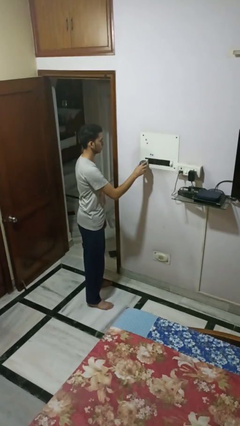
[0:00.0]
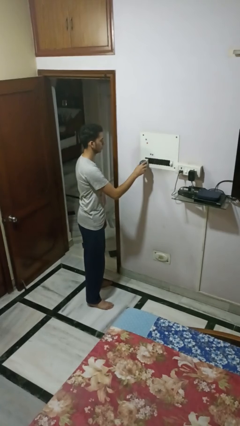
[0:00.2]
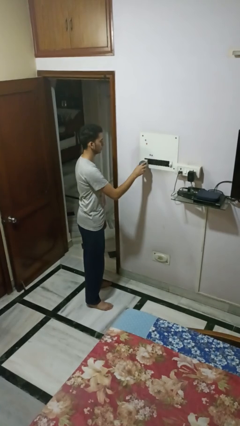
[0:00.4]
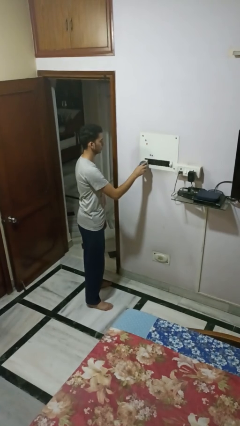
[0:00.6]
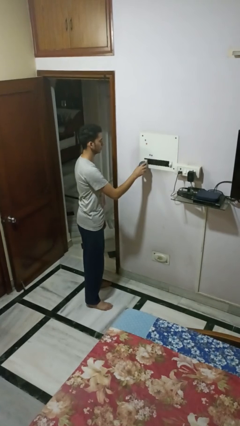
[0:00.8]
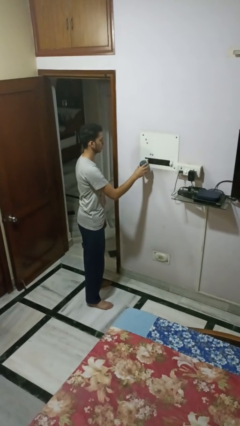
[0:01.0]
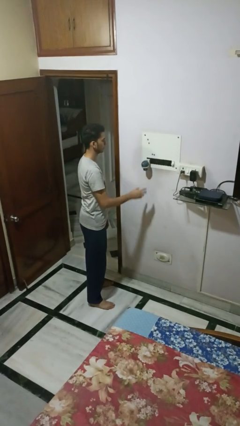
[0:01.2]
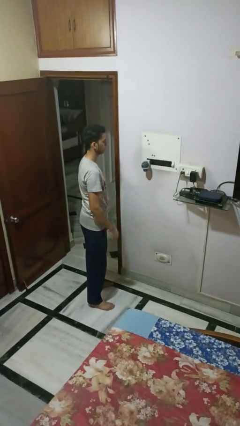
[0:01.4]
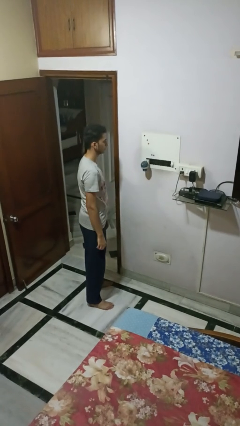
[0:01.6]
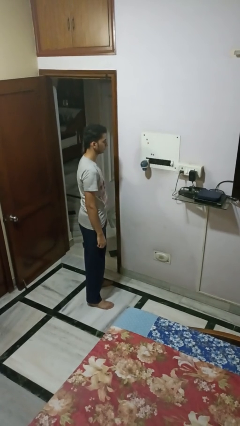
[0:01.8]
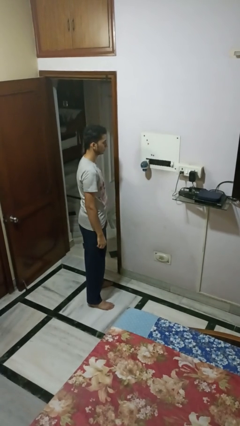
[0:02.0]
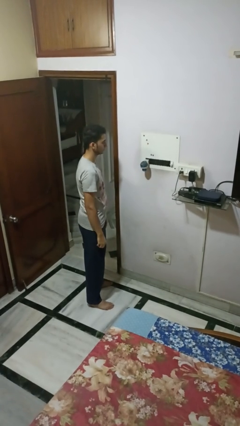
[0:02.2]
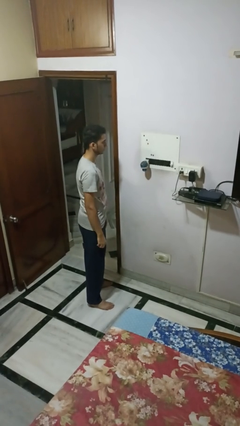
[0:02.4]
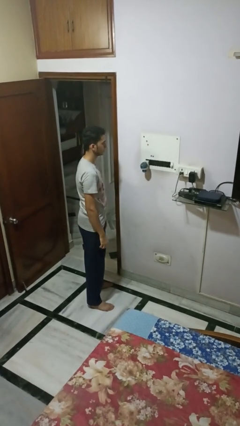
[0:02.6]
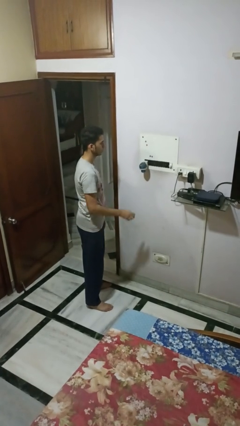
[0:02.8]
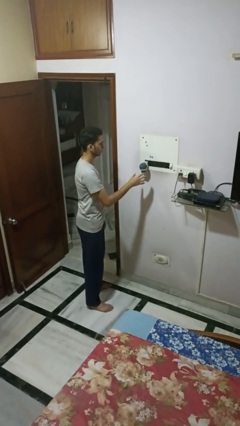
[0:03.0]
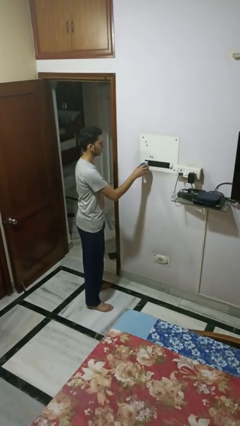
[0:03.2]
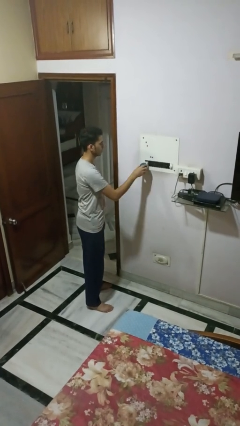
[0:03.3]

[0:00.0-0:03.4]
person plugs into electrical socket

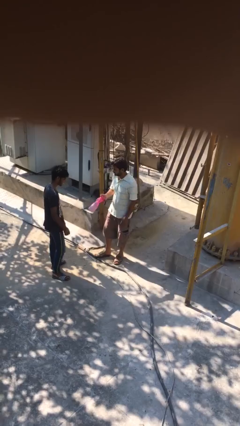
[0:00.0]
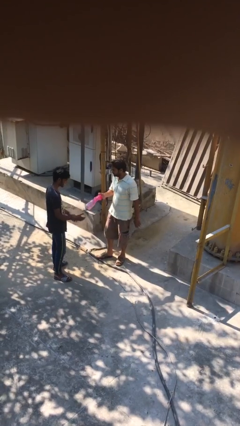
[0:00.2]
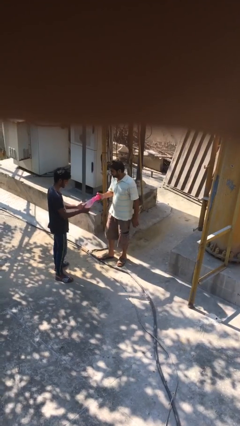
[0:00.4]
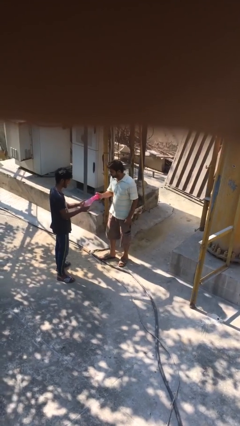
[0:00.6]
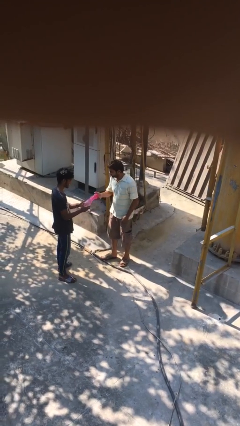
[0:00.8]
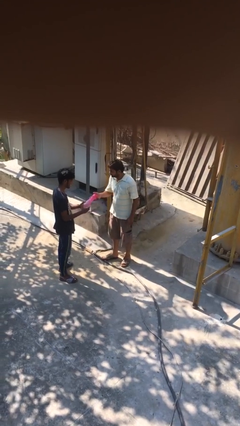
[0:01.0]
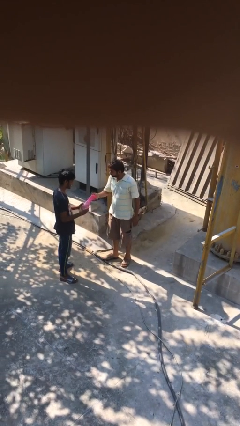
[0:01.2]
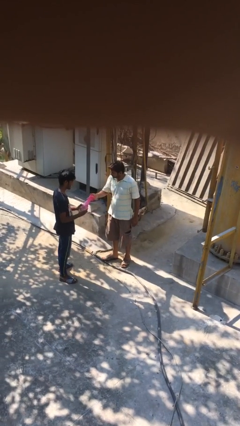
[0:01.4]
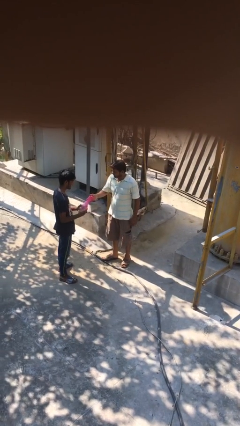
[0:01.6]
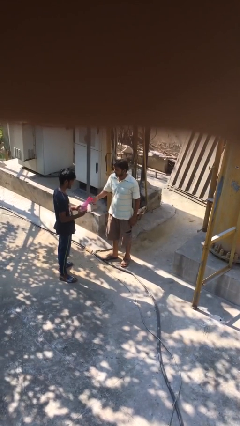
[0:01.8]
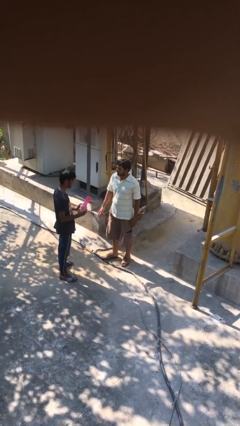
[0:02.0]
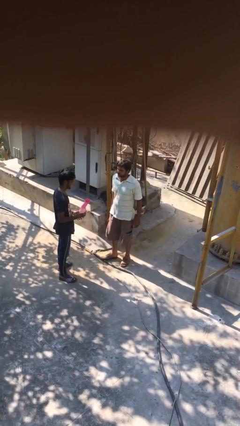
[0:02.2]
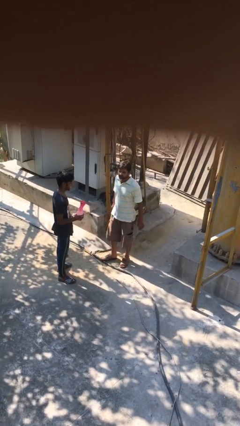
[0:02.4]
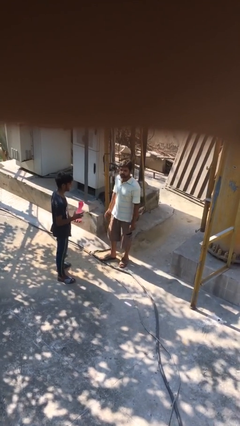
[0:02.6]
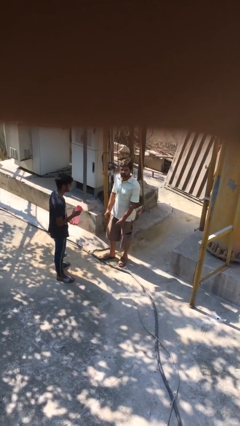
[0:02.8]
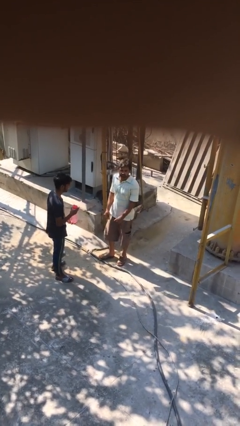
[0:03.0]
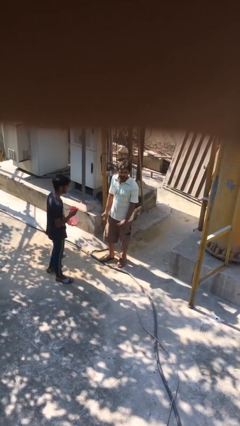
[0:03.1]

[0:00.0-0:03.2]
person transfers object to person

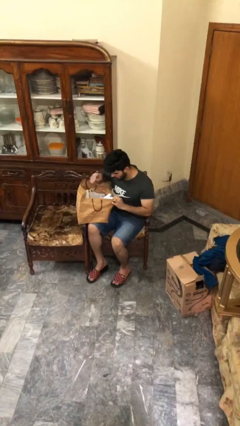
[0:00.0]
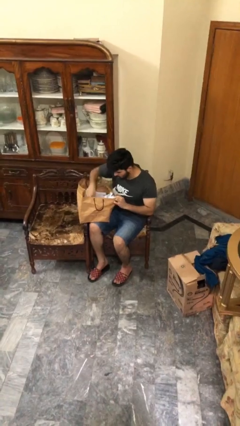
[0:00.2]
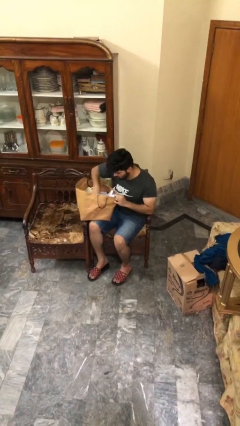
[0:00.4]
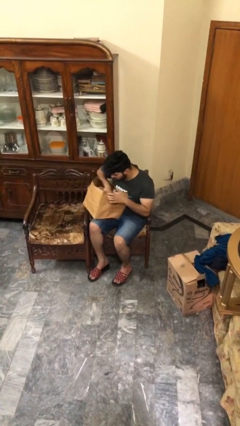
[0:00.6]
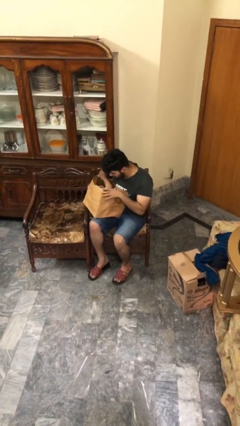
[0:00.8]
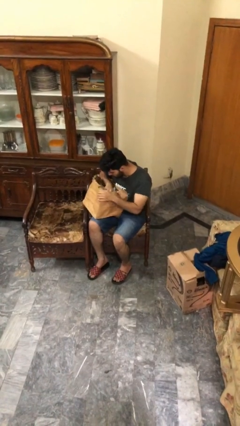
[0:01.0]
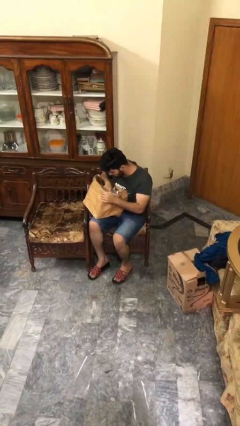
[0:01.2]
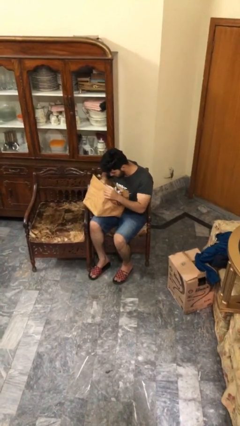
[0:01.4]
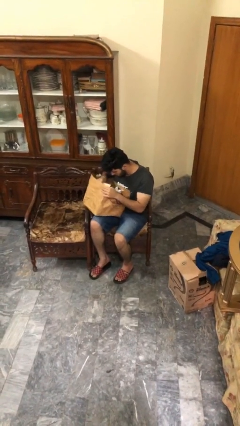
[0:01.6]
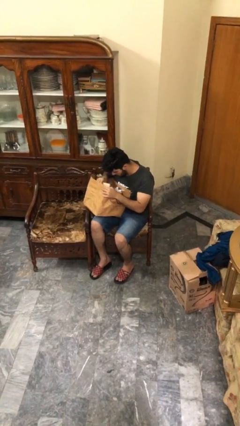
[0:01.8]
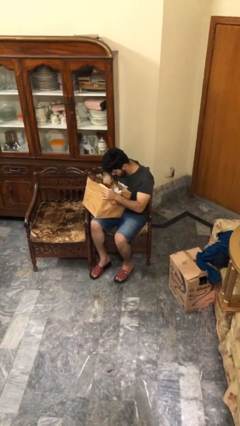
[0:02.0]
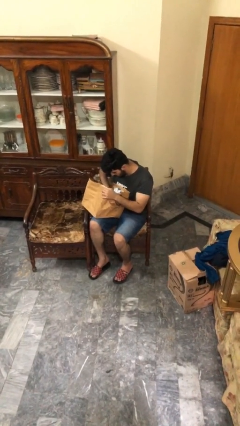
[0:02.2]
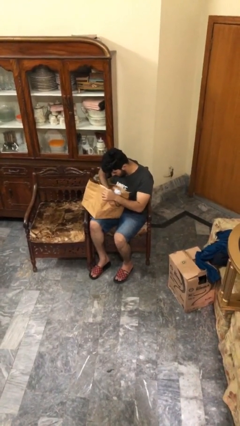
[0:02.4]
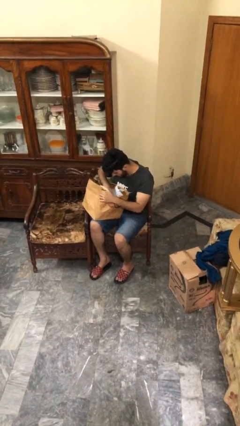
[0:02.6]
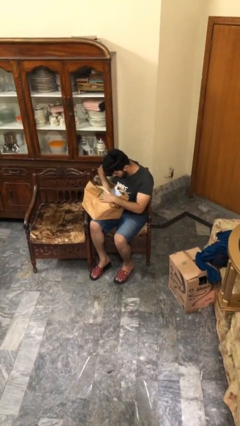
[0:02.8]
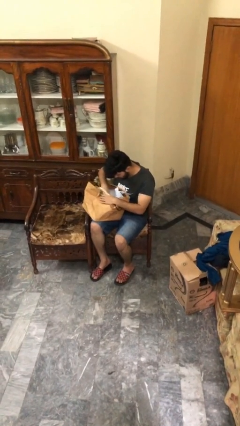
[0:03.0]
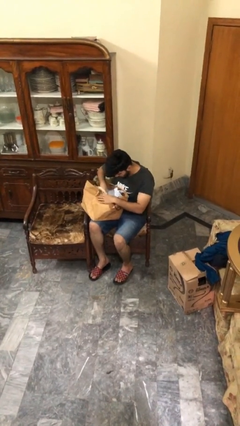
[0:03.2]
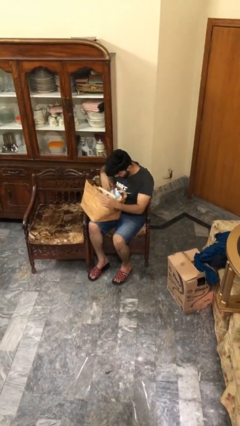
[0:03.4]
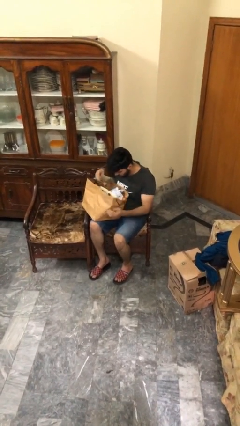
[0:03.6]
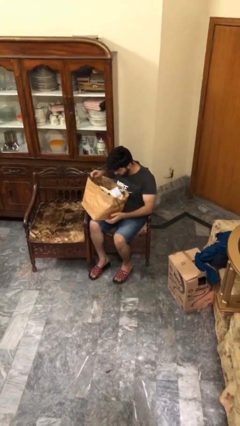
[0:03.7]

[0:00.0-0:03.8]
person searches in bag

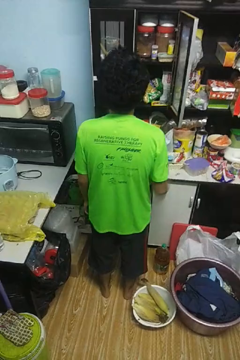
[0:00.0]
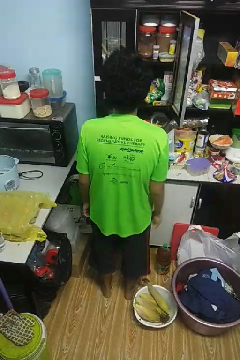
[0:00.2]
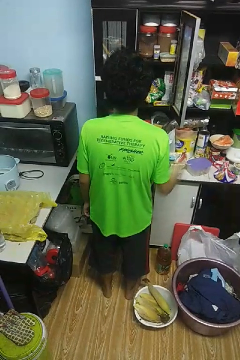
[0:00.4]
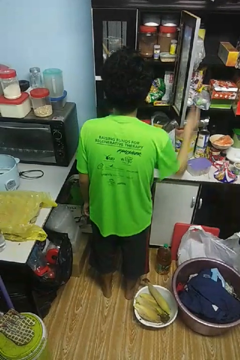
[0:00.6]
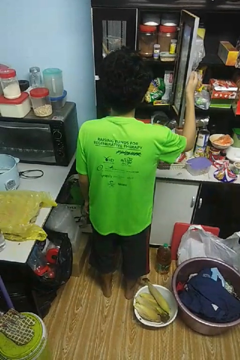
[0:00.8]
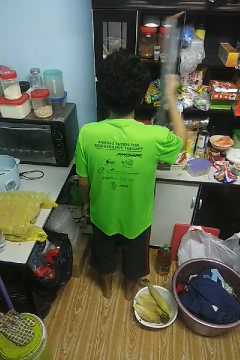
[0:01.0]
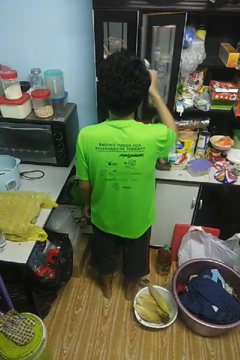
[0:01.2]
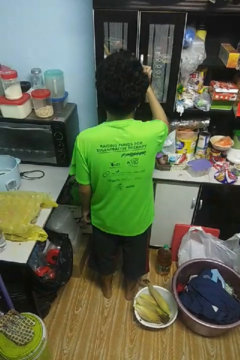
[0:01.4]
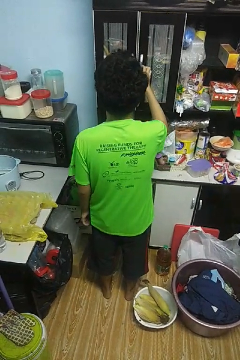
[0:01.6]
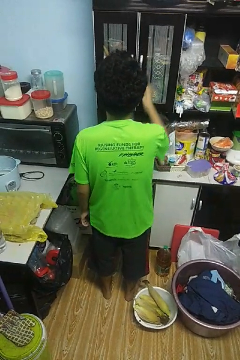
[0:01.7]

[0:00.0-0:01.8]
person closes cabinet

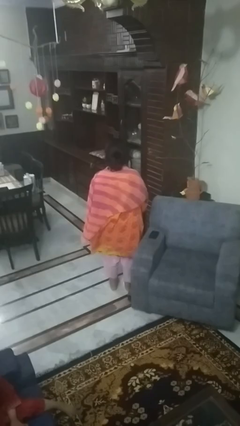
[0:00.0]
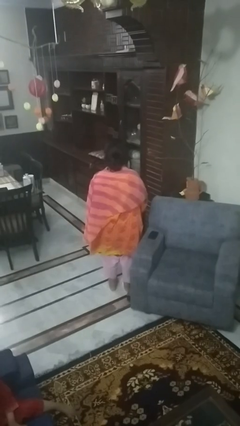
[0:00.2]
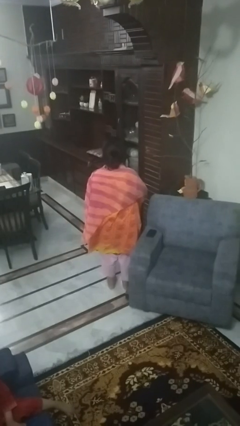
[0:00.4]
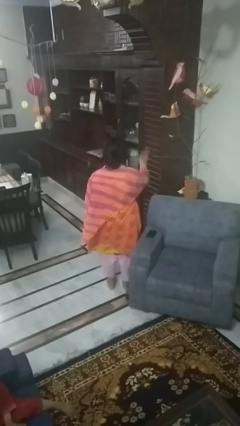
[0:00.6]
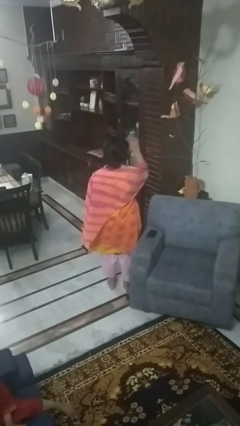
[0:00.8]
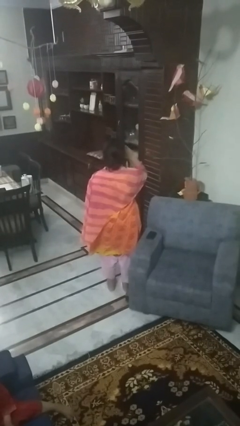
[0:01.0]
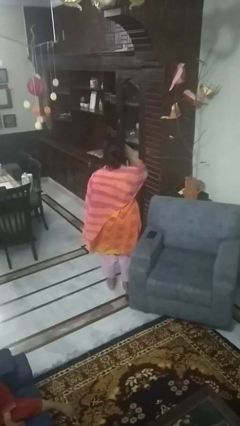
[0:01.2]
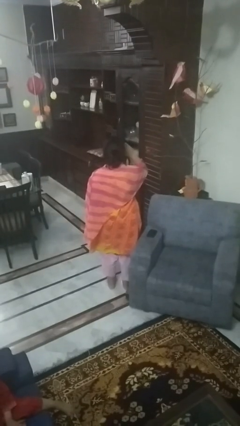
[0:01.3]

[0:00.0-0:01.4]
person salutes

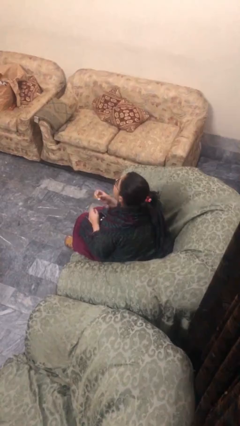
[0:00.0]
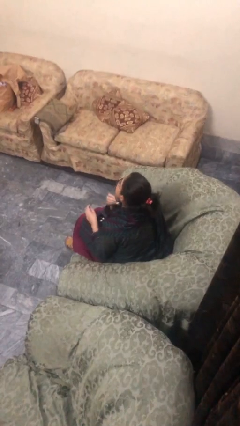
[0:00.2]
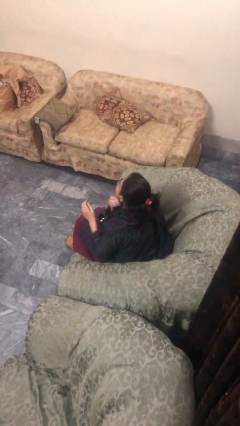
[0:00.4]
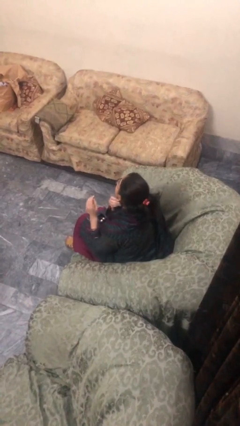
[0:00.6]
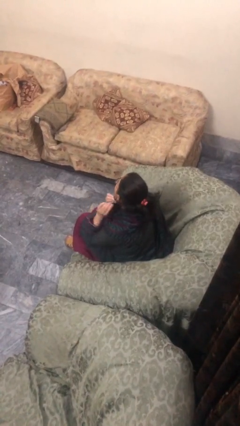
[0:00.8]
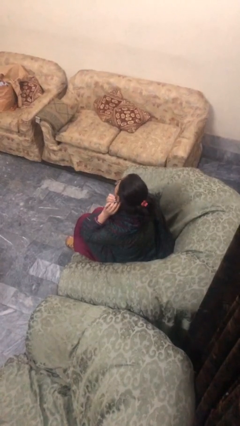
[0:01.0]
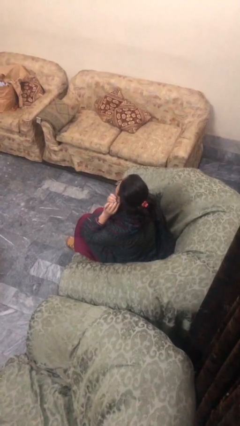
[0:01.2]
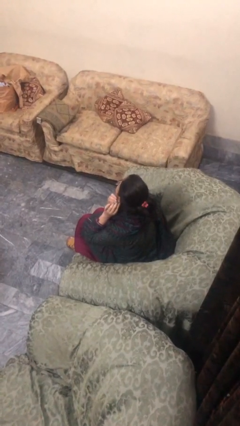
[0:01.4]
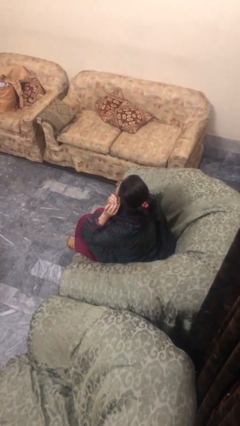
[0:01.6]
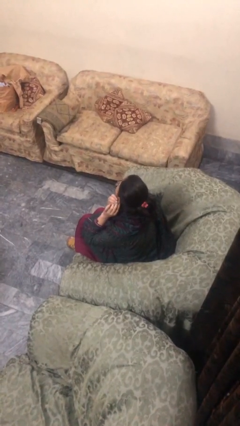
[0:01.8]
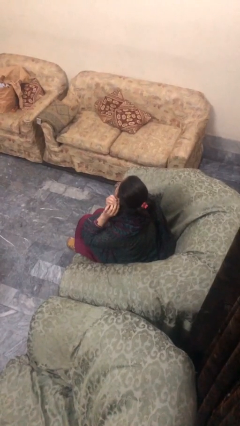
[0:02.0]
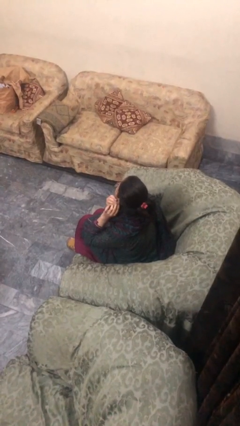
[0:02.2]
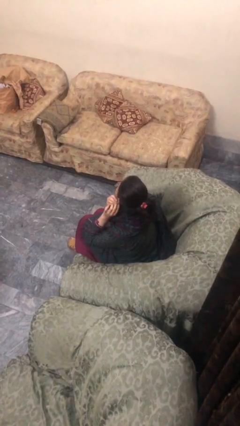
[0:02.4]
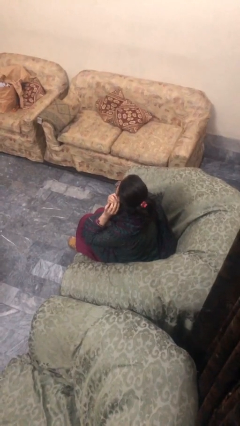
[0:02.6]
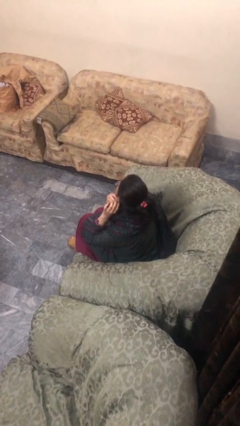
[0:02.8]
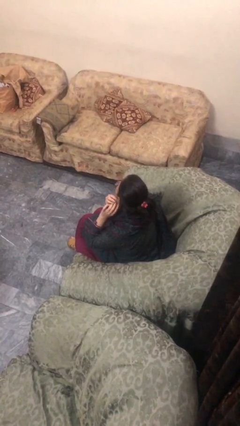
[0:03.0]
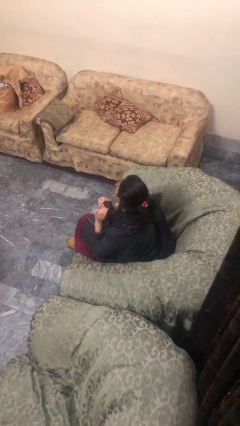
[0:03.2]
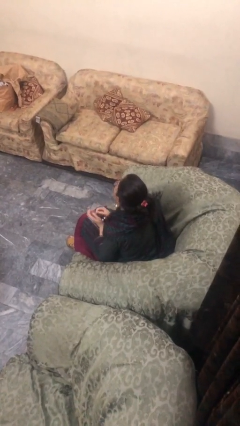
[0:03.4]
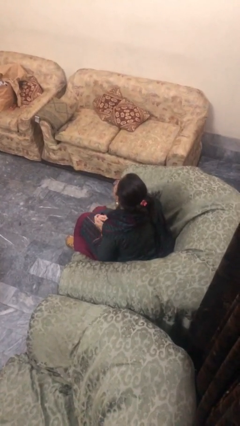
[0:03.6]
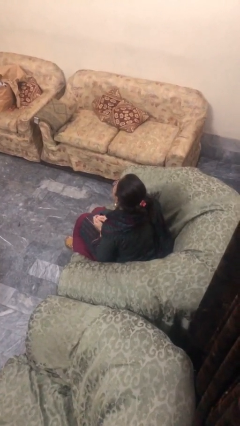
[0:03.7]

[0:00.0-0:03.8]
person puts on earrings
